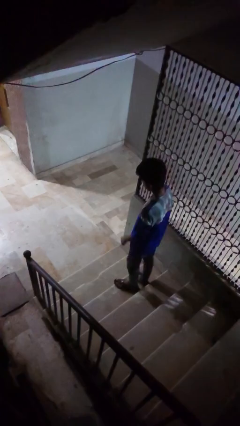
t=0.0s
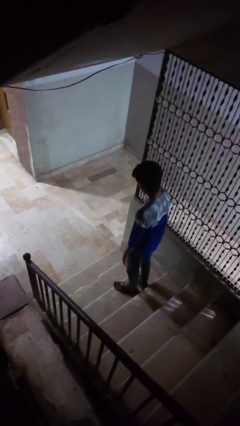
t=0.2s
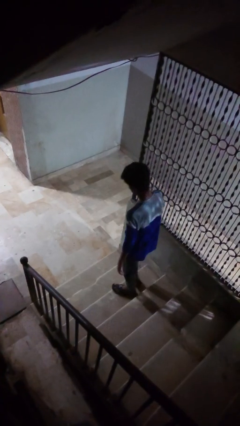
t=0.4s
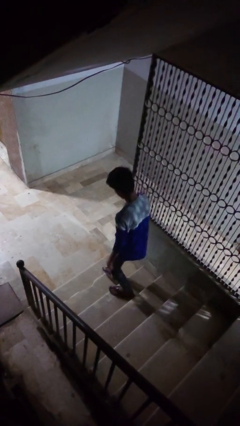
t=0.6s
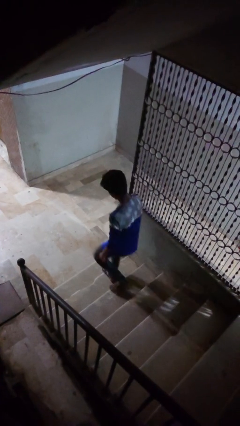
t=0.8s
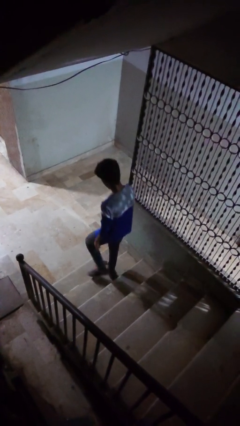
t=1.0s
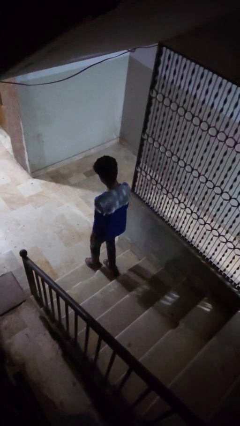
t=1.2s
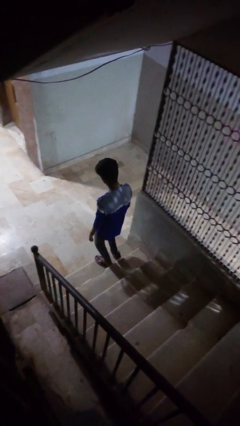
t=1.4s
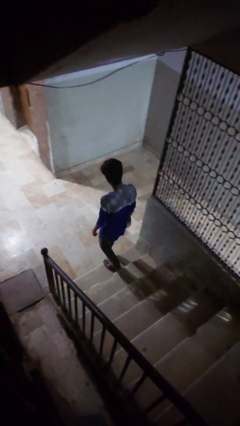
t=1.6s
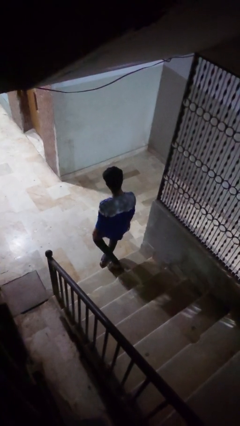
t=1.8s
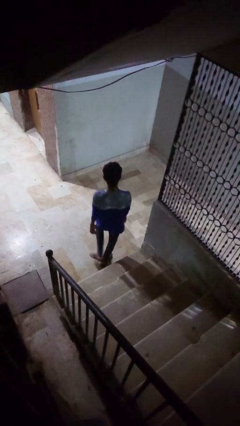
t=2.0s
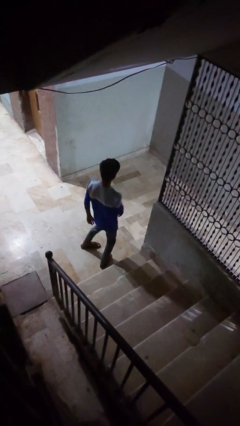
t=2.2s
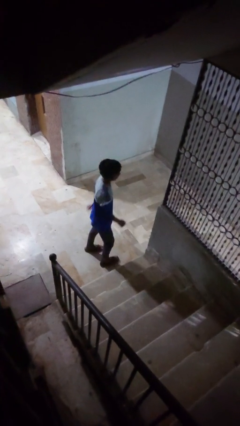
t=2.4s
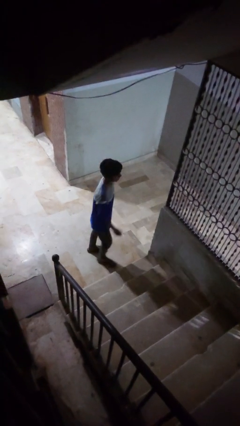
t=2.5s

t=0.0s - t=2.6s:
person climbs down stairs

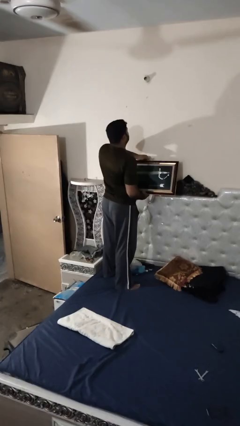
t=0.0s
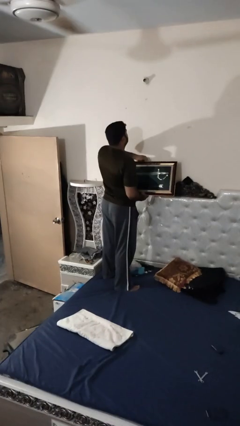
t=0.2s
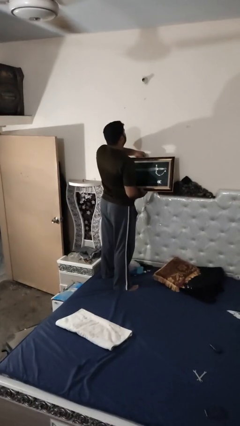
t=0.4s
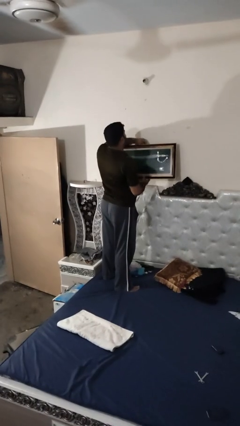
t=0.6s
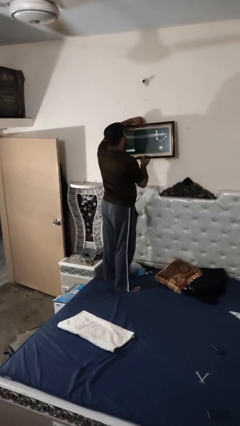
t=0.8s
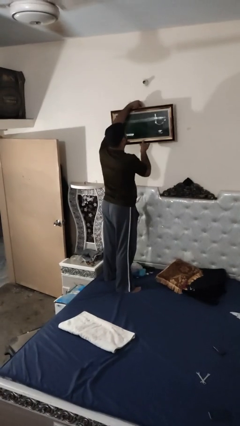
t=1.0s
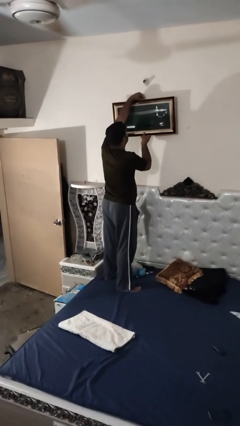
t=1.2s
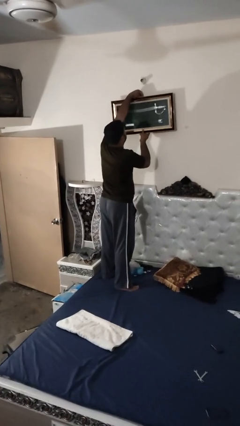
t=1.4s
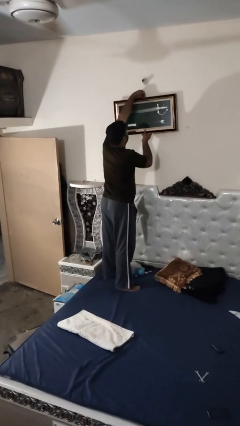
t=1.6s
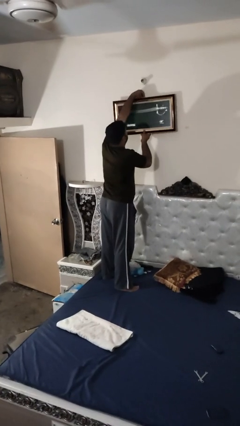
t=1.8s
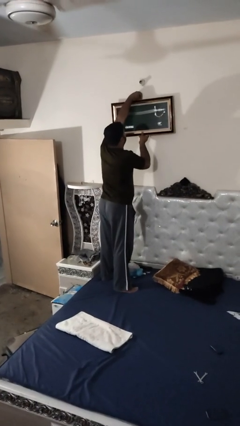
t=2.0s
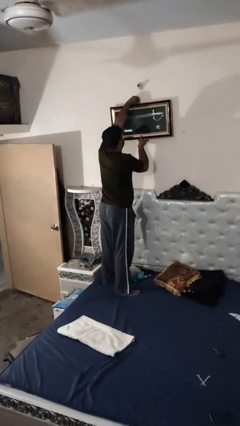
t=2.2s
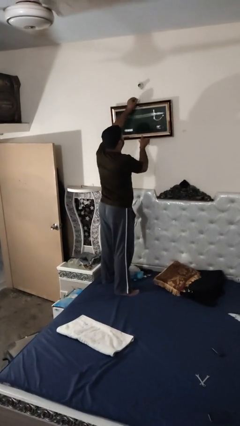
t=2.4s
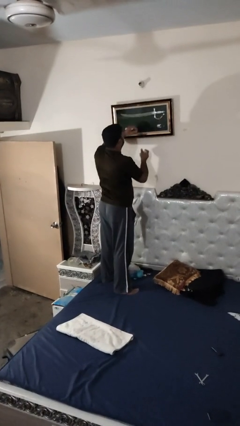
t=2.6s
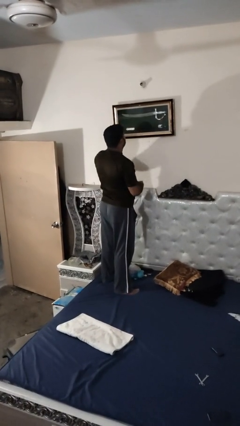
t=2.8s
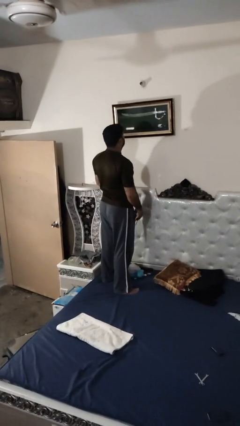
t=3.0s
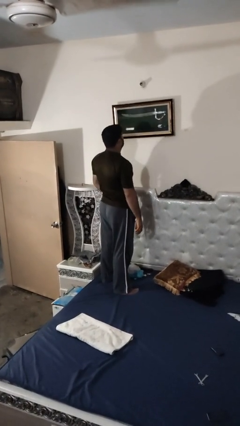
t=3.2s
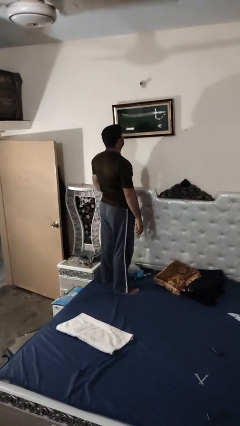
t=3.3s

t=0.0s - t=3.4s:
person puts up picture frame

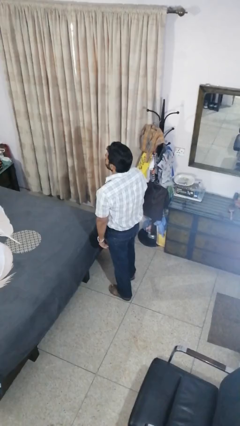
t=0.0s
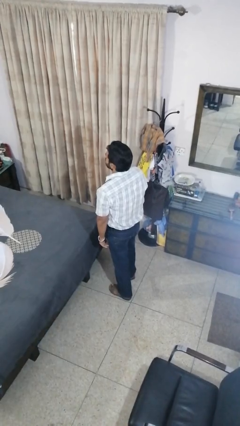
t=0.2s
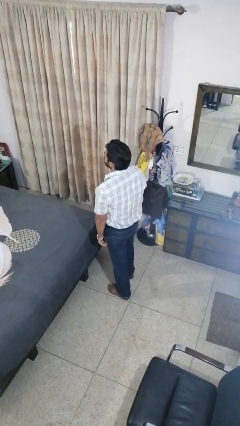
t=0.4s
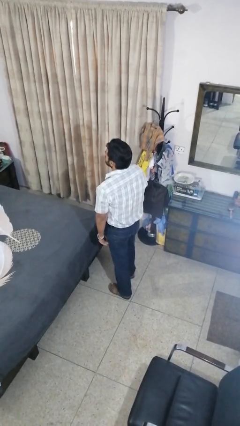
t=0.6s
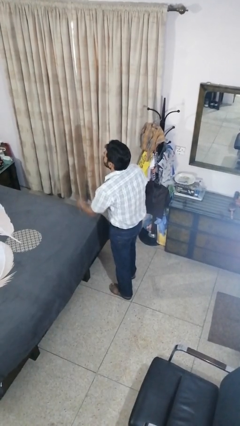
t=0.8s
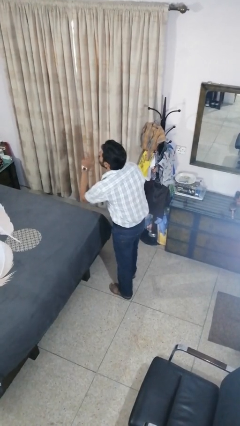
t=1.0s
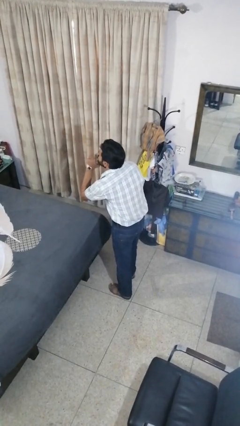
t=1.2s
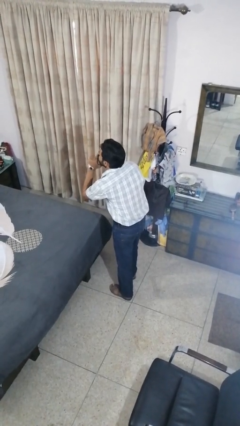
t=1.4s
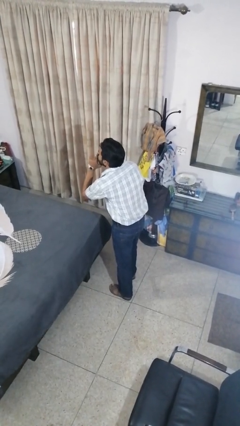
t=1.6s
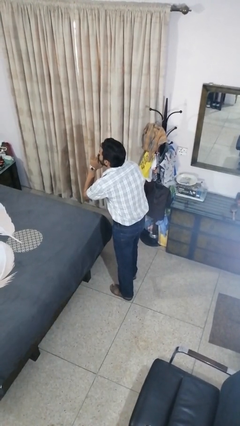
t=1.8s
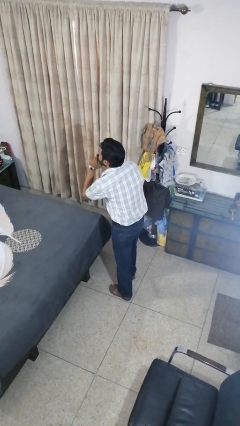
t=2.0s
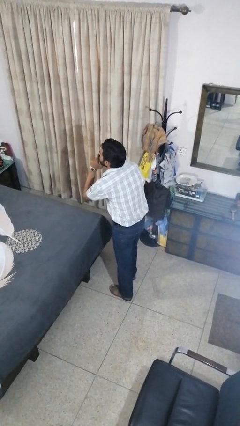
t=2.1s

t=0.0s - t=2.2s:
person gestures be quiet

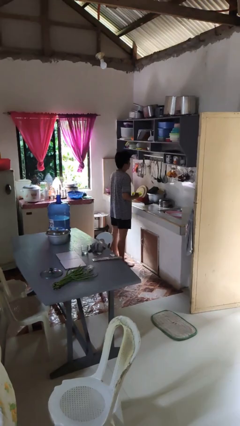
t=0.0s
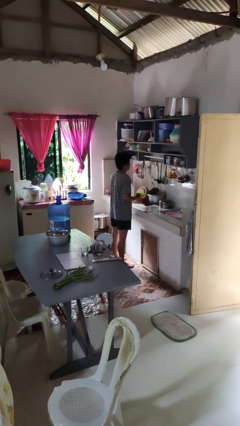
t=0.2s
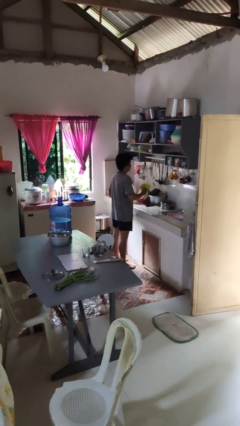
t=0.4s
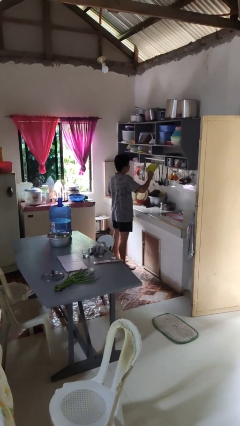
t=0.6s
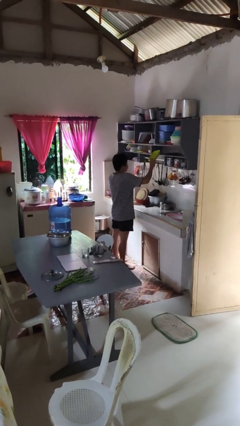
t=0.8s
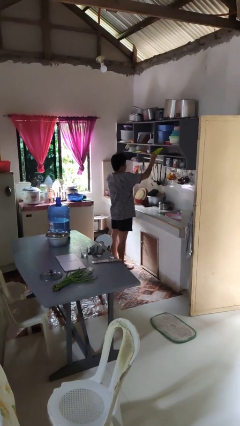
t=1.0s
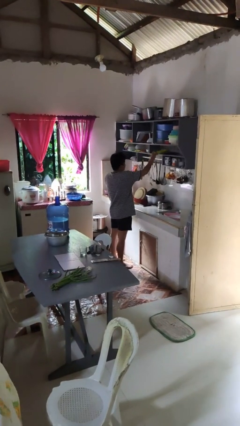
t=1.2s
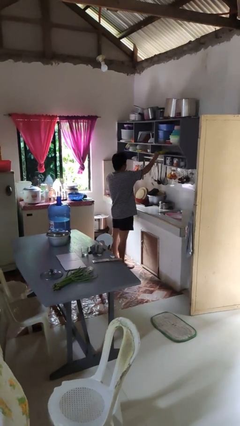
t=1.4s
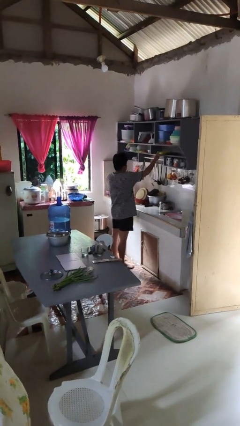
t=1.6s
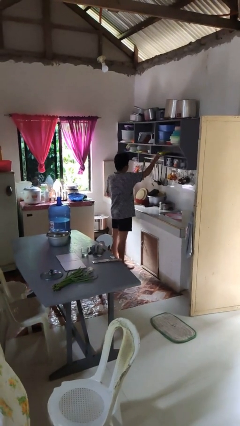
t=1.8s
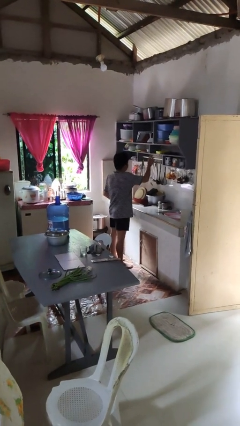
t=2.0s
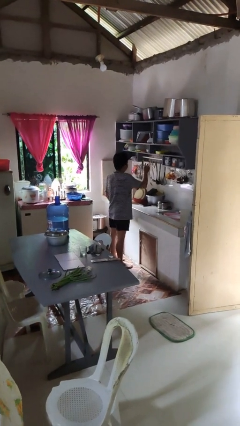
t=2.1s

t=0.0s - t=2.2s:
person puts object in cabinet

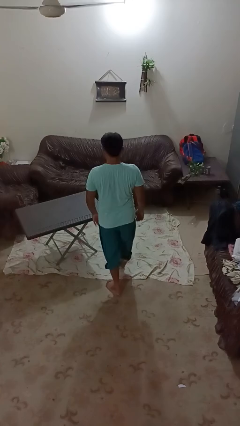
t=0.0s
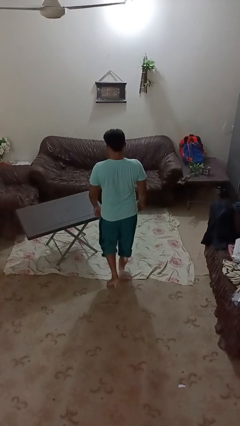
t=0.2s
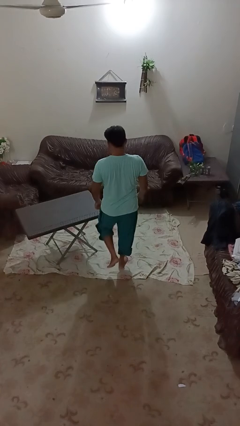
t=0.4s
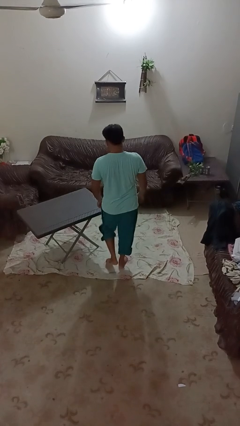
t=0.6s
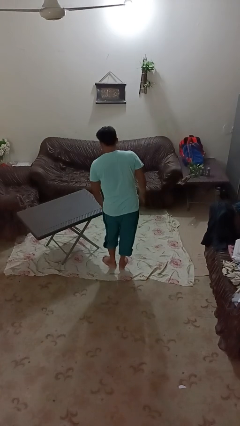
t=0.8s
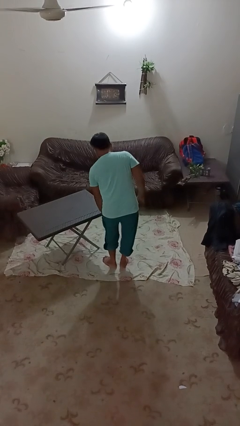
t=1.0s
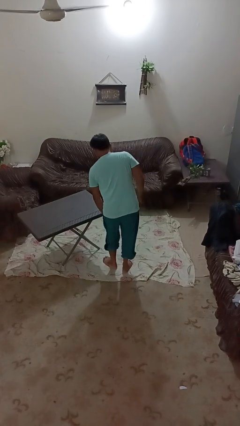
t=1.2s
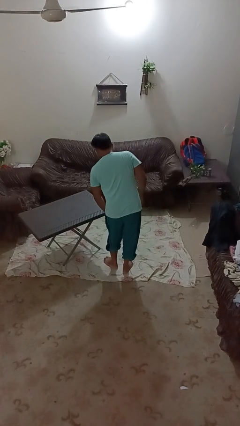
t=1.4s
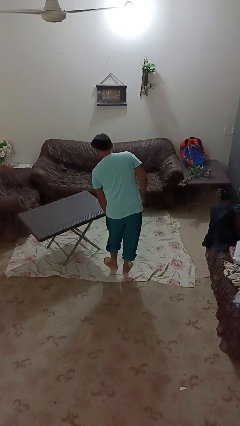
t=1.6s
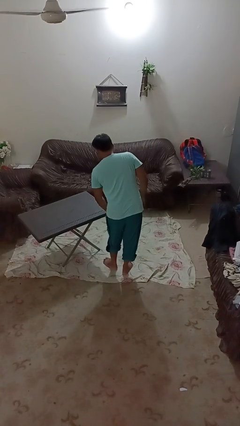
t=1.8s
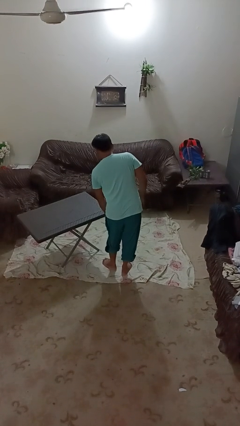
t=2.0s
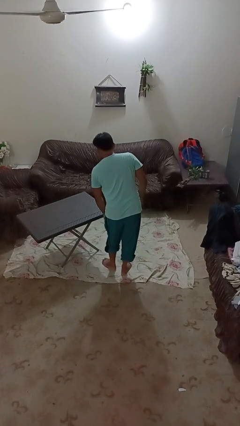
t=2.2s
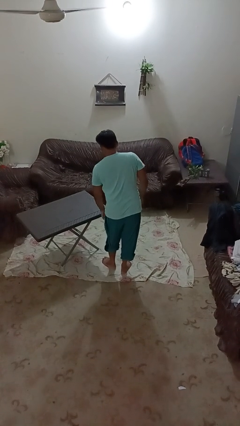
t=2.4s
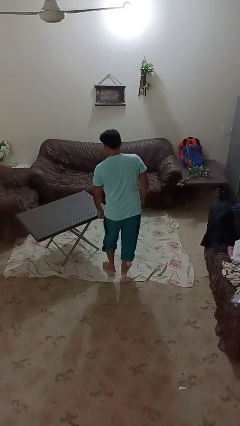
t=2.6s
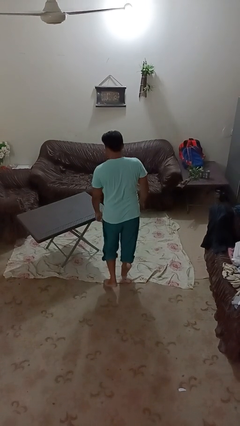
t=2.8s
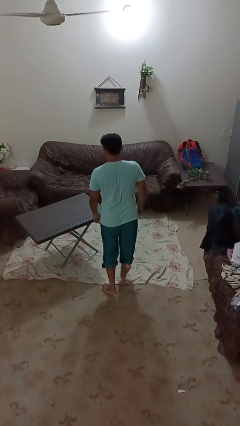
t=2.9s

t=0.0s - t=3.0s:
person bumps into table

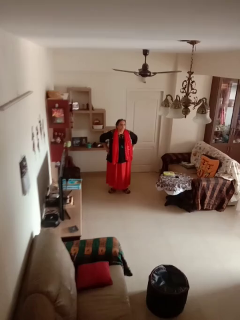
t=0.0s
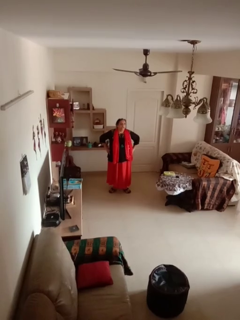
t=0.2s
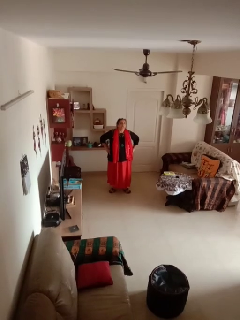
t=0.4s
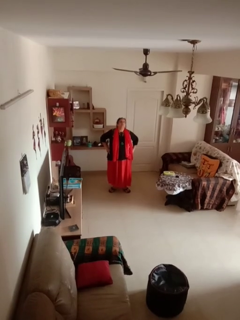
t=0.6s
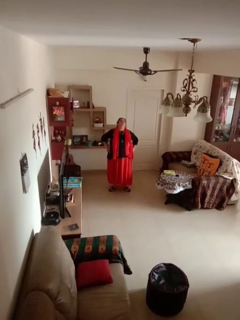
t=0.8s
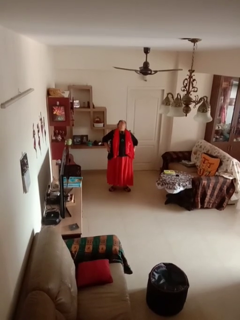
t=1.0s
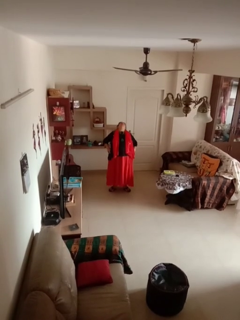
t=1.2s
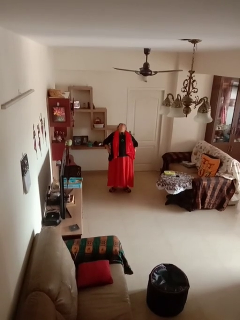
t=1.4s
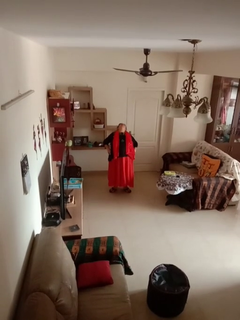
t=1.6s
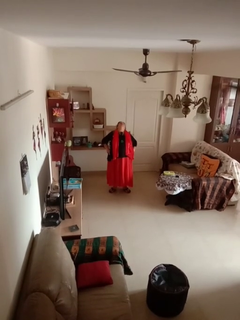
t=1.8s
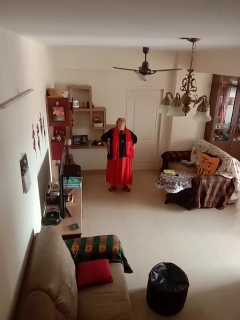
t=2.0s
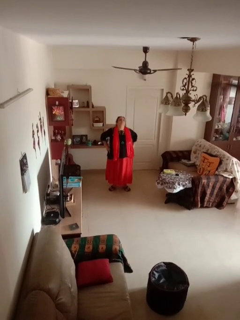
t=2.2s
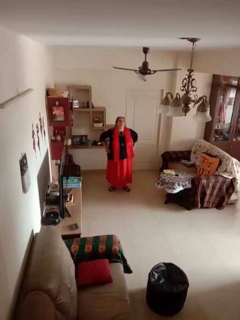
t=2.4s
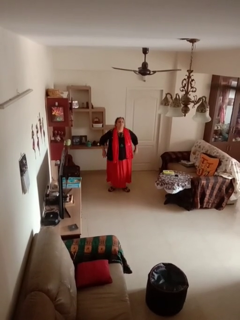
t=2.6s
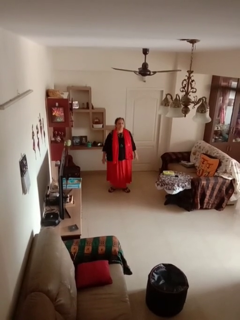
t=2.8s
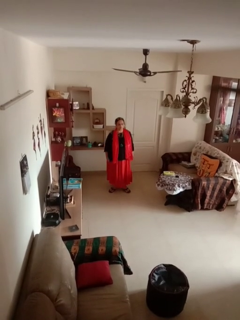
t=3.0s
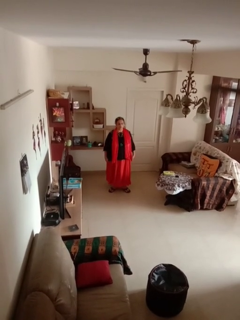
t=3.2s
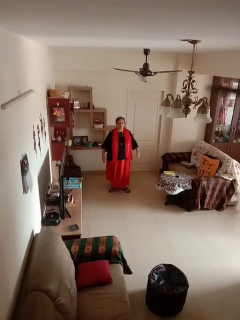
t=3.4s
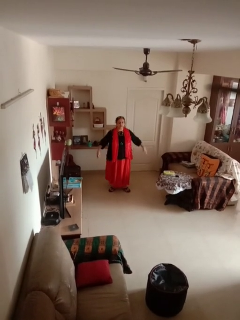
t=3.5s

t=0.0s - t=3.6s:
person stretches back

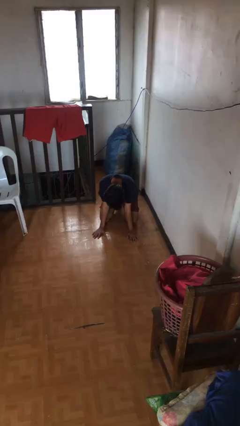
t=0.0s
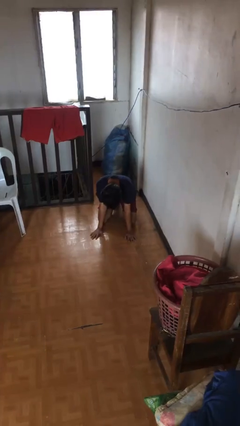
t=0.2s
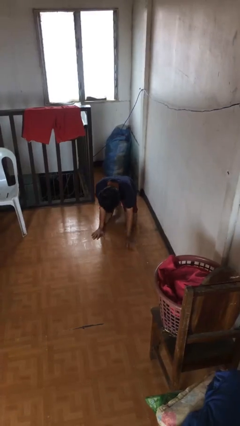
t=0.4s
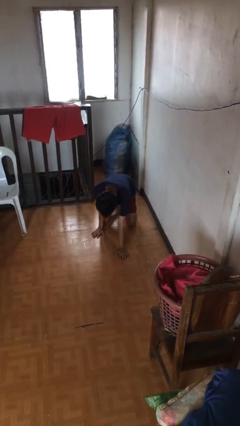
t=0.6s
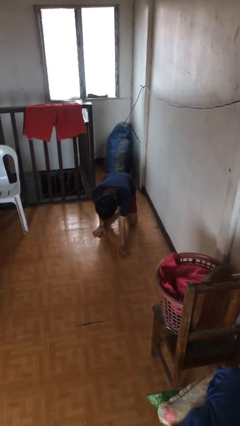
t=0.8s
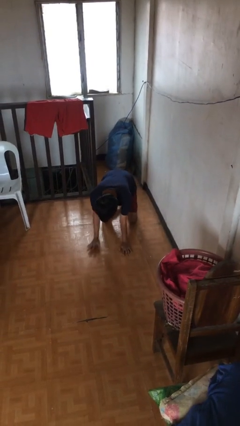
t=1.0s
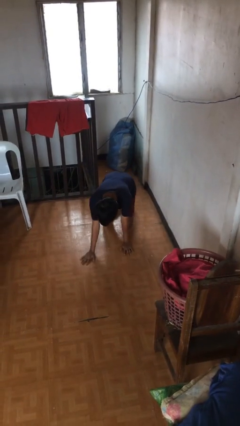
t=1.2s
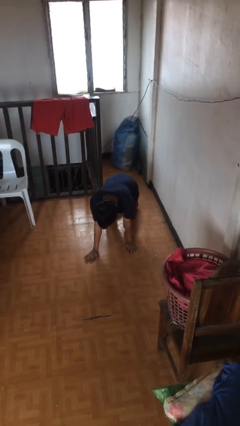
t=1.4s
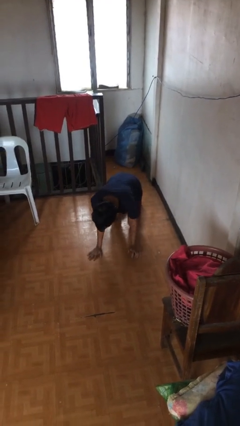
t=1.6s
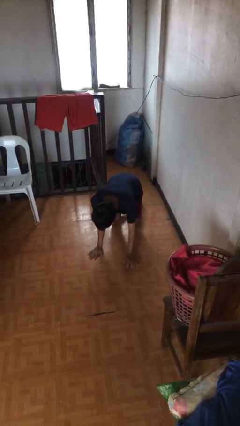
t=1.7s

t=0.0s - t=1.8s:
person crawls
